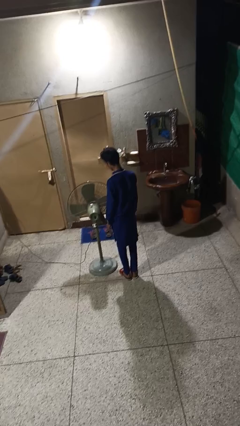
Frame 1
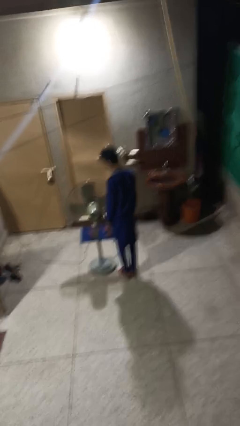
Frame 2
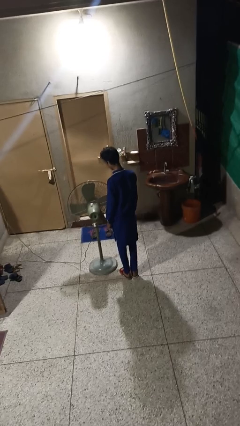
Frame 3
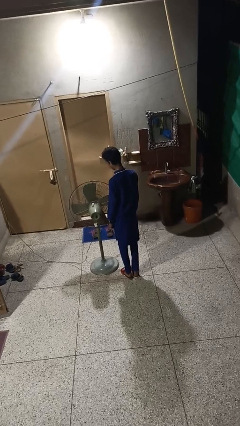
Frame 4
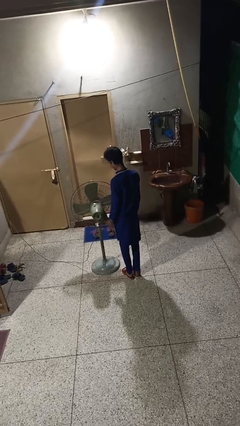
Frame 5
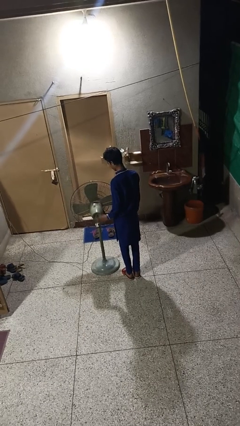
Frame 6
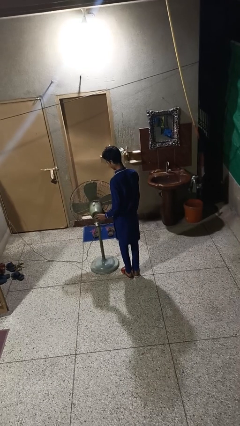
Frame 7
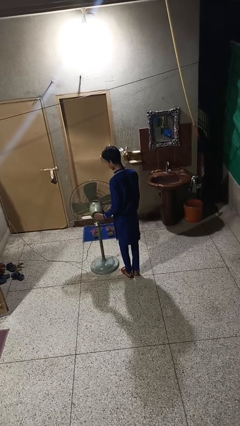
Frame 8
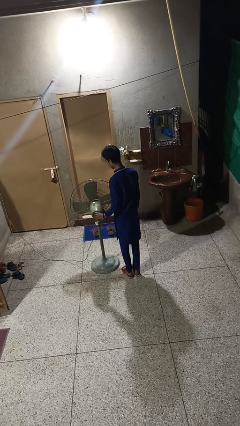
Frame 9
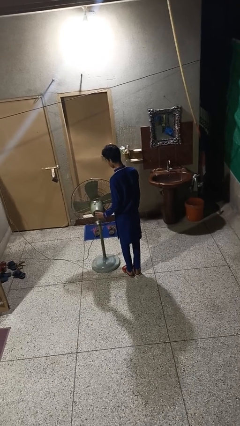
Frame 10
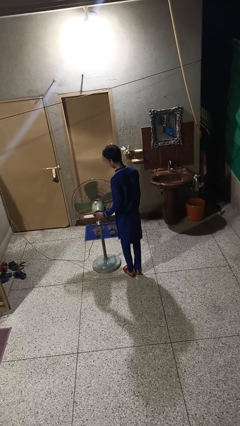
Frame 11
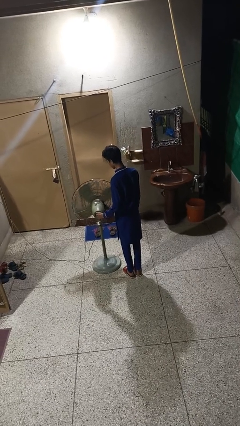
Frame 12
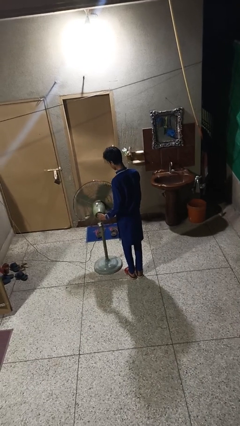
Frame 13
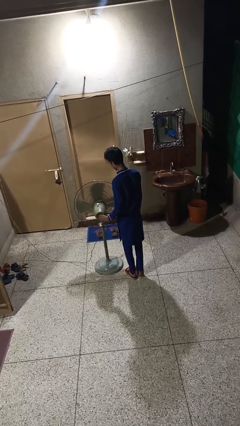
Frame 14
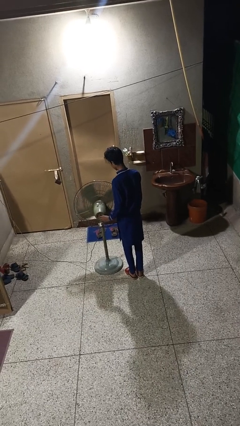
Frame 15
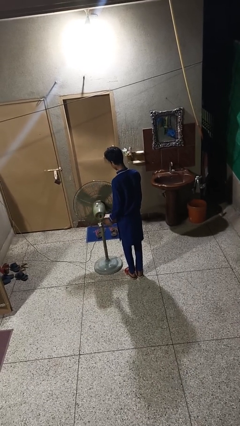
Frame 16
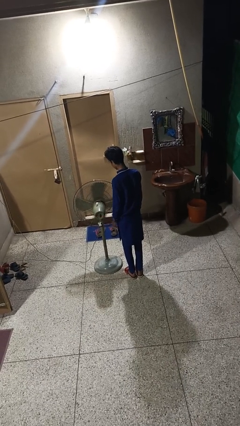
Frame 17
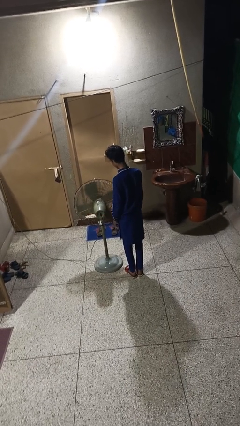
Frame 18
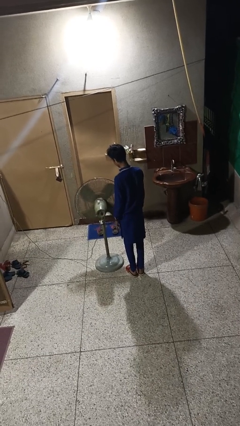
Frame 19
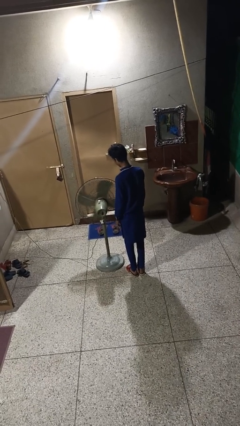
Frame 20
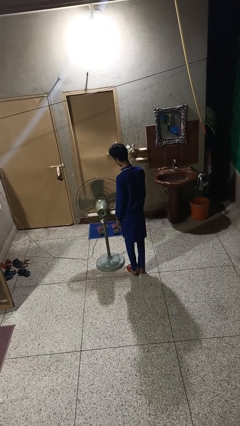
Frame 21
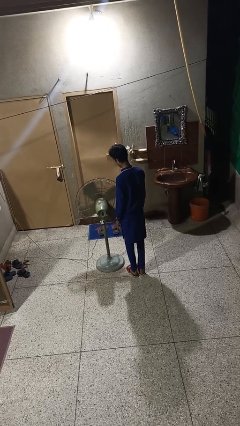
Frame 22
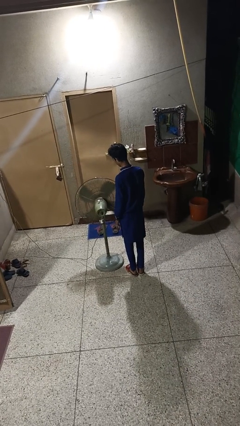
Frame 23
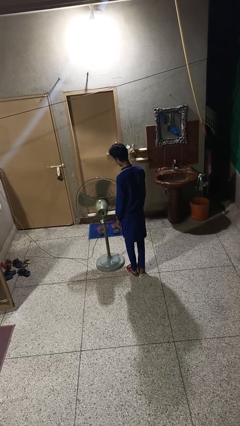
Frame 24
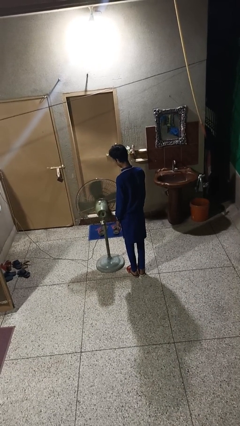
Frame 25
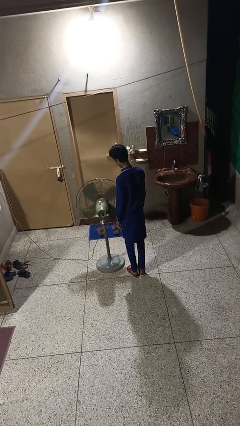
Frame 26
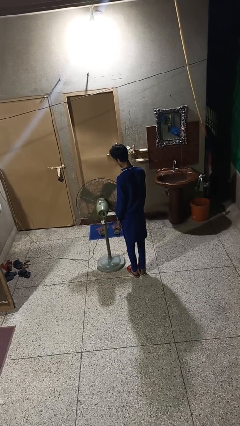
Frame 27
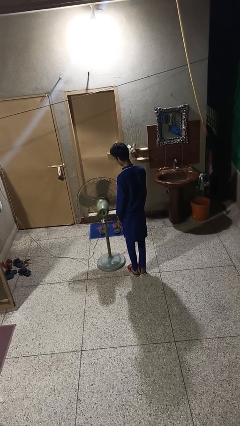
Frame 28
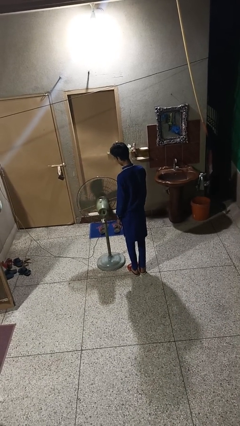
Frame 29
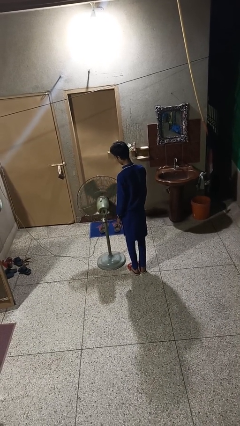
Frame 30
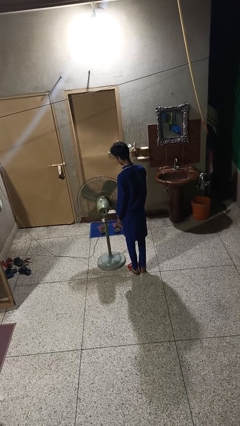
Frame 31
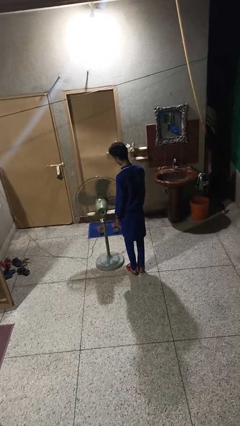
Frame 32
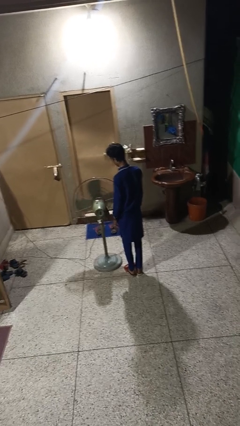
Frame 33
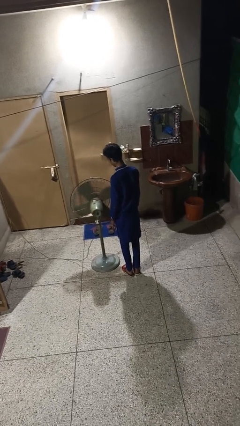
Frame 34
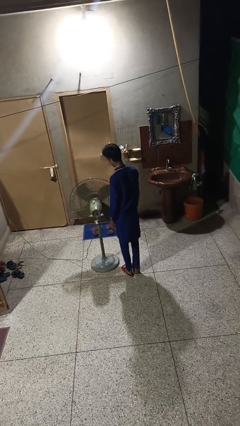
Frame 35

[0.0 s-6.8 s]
person turns on fan

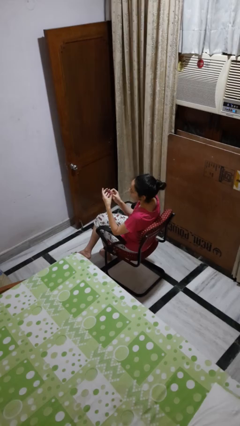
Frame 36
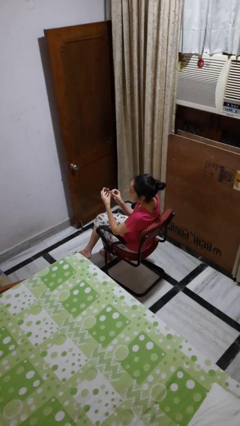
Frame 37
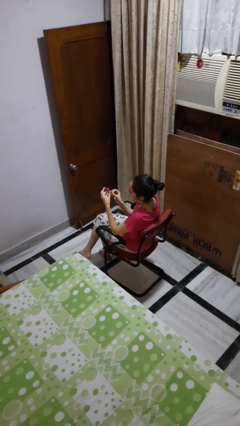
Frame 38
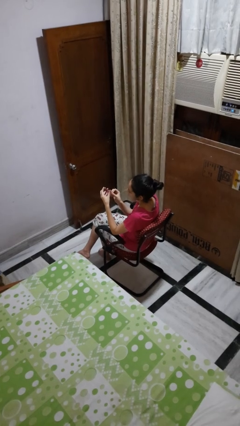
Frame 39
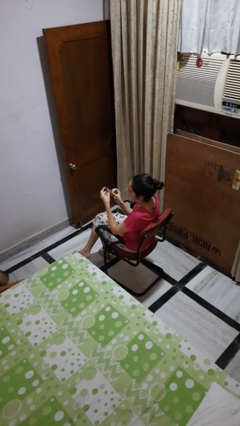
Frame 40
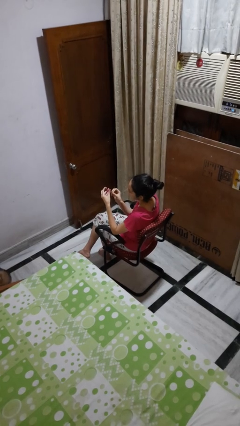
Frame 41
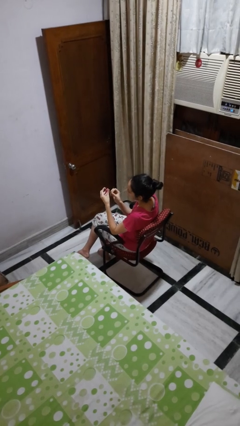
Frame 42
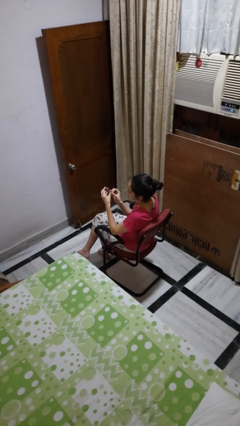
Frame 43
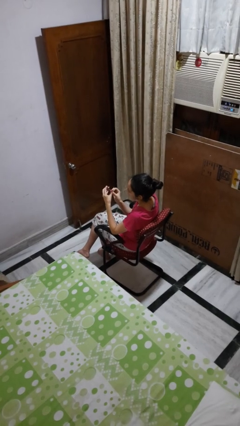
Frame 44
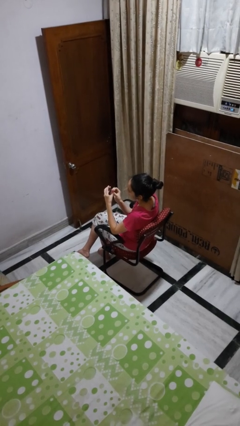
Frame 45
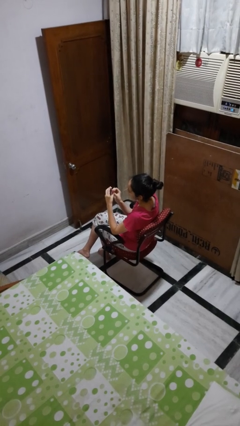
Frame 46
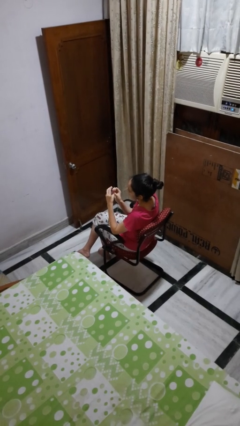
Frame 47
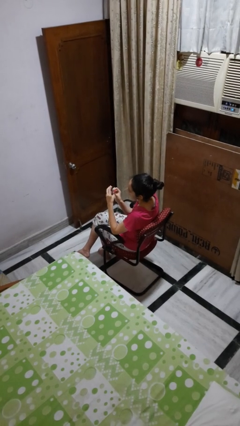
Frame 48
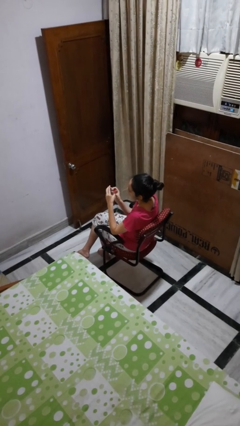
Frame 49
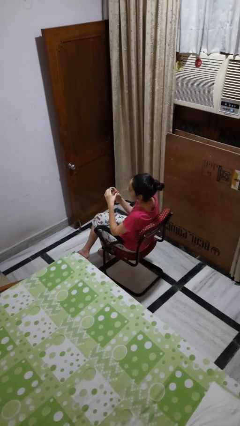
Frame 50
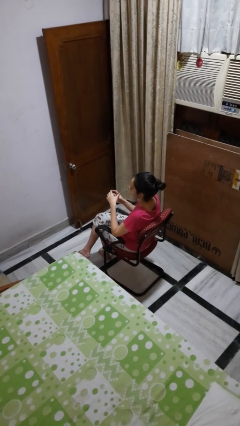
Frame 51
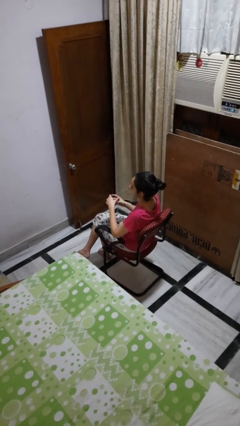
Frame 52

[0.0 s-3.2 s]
person clips fingernails

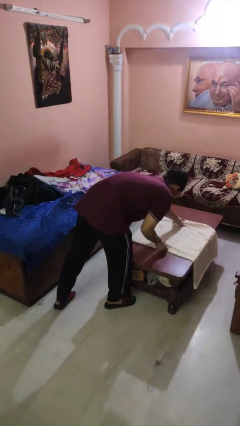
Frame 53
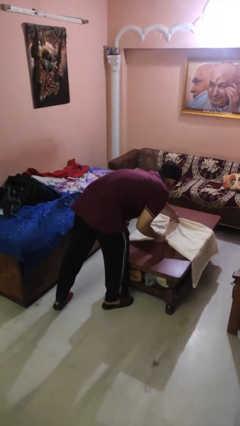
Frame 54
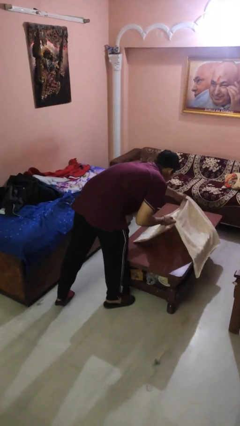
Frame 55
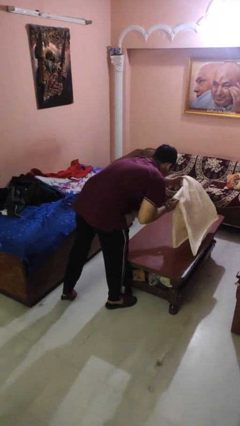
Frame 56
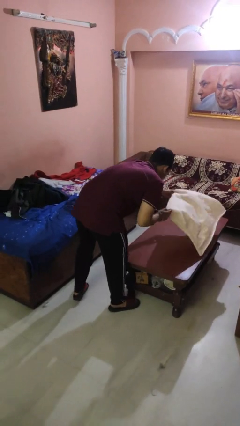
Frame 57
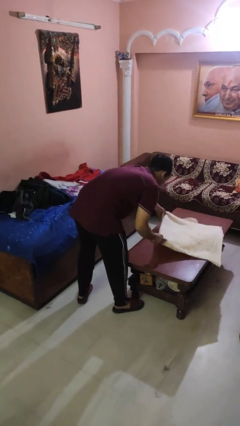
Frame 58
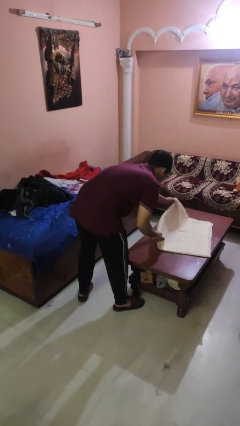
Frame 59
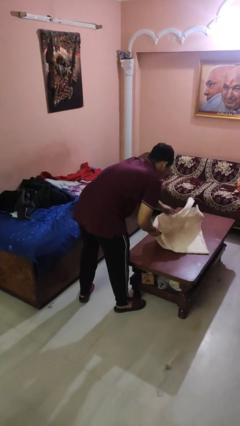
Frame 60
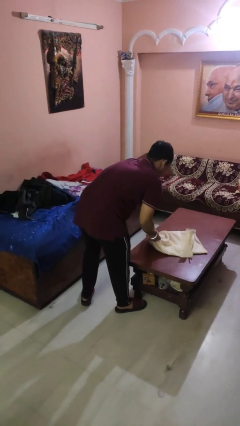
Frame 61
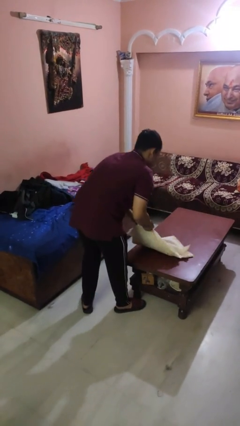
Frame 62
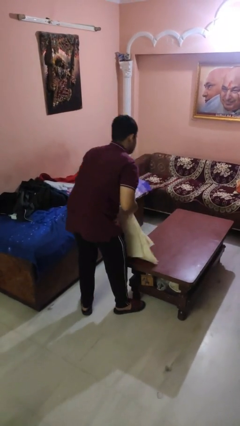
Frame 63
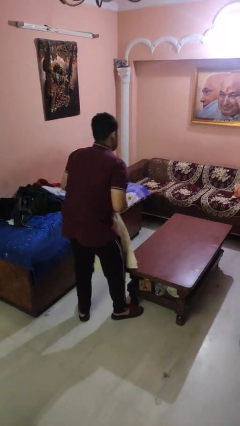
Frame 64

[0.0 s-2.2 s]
person folds tablecloth

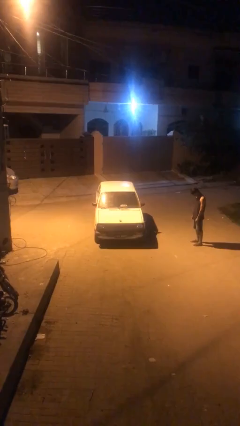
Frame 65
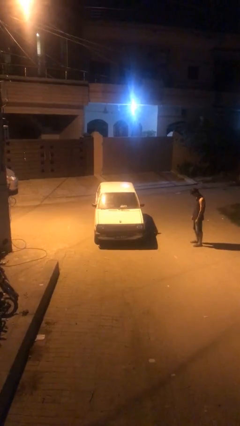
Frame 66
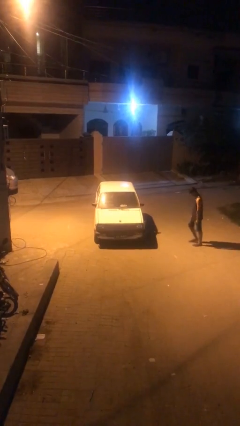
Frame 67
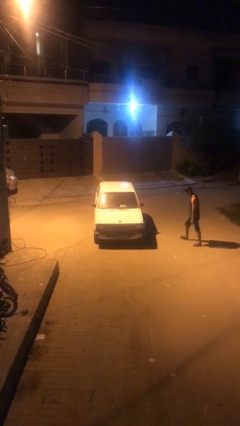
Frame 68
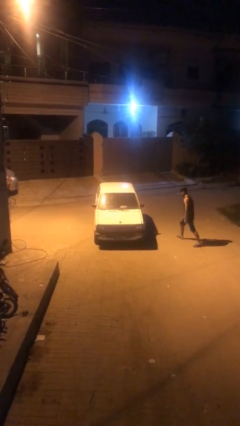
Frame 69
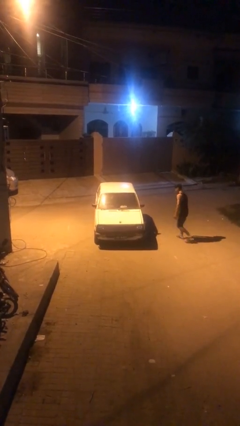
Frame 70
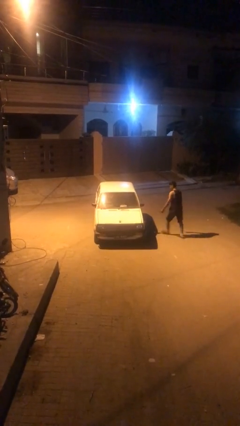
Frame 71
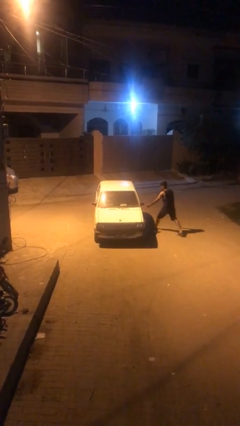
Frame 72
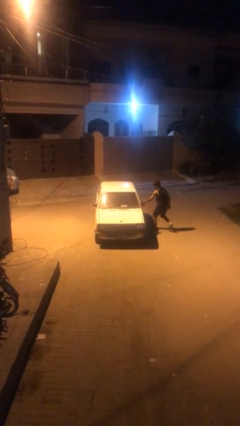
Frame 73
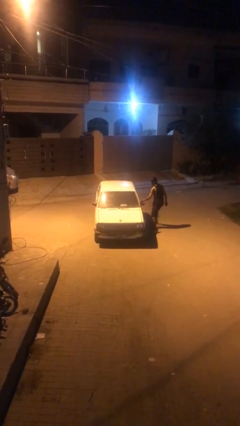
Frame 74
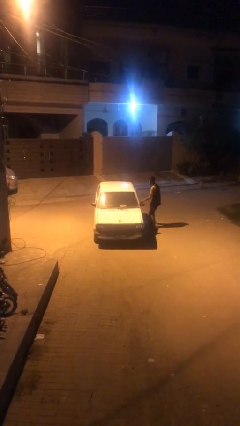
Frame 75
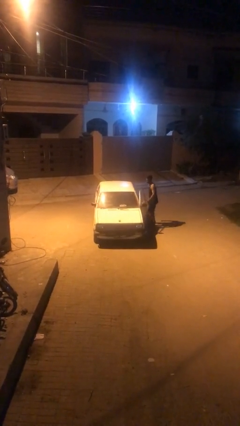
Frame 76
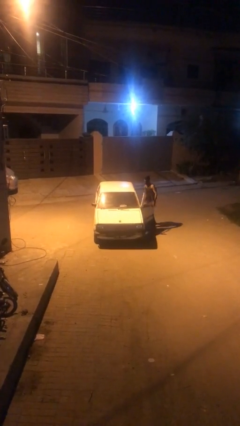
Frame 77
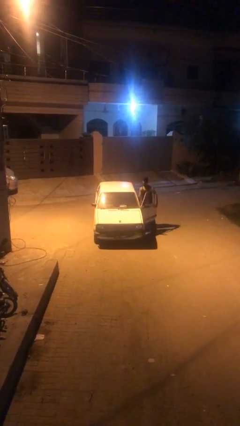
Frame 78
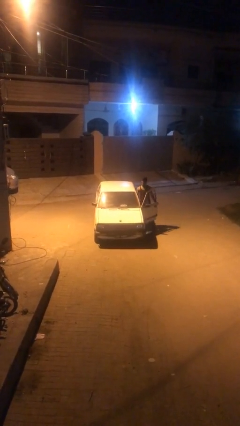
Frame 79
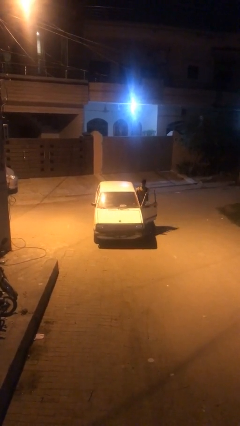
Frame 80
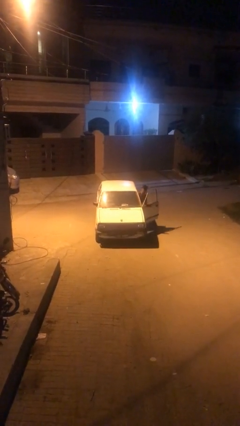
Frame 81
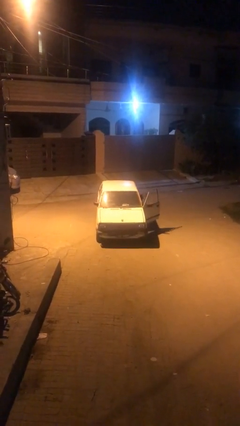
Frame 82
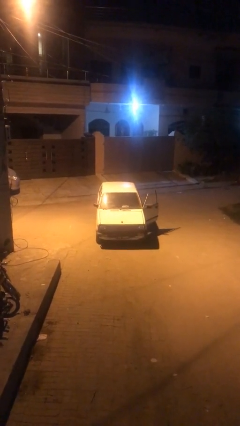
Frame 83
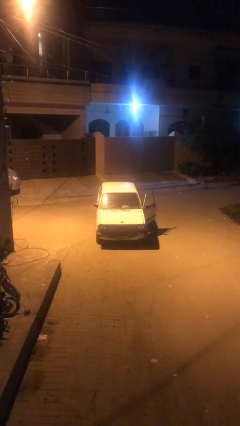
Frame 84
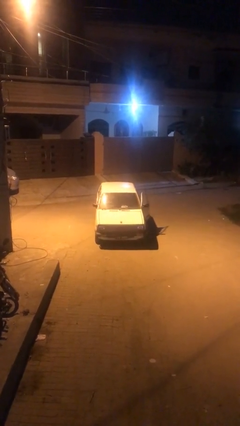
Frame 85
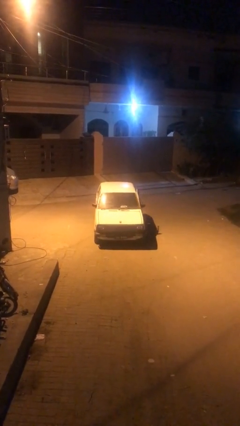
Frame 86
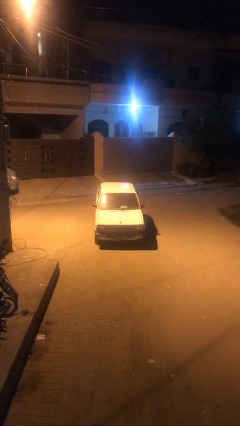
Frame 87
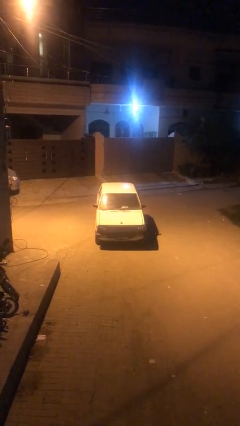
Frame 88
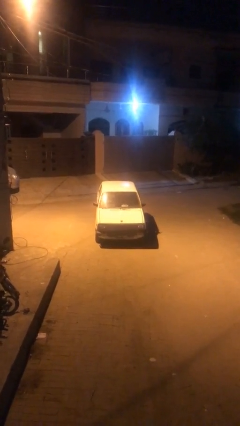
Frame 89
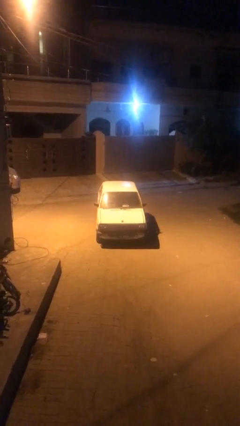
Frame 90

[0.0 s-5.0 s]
car picks up person

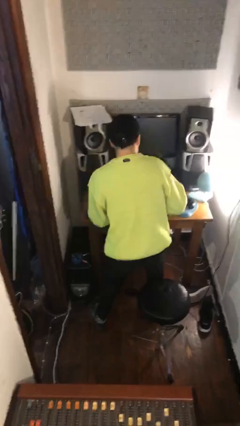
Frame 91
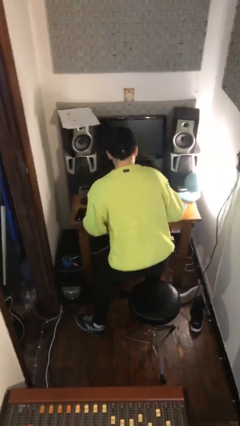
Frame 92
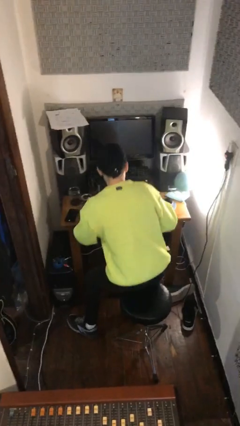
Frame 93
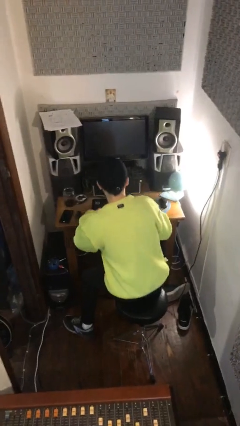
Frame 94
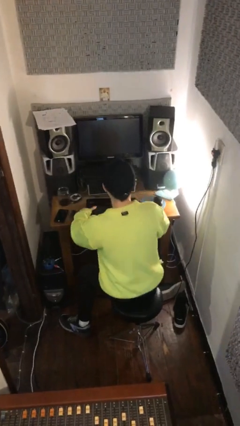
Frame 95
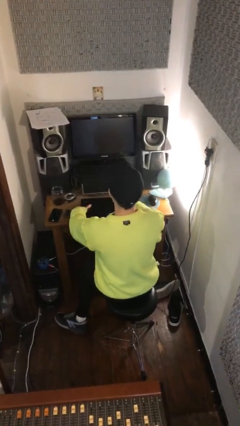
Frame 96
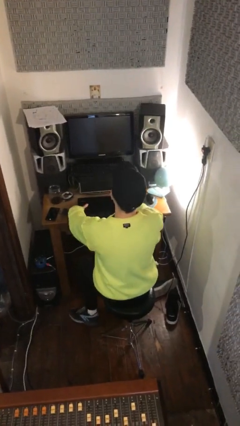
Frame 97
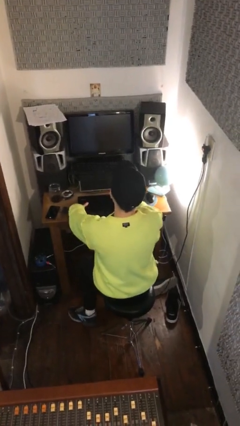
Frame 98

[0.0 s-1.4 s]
person sits down
